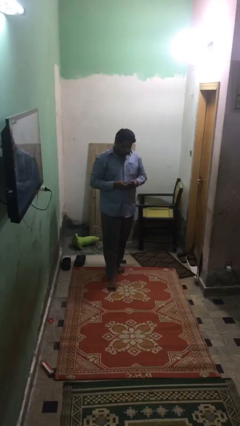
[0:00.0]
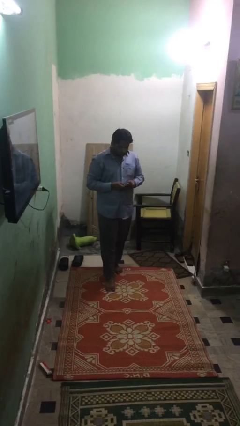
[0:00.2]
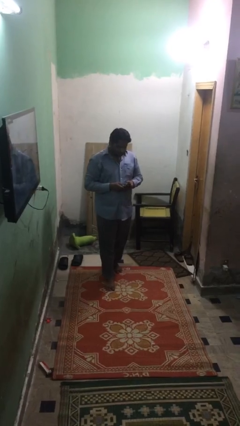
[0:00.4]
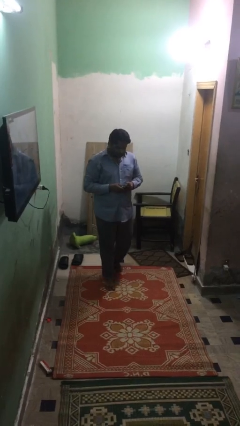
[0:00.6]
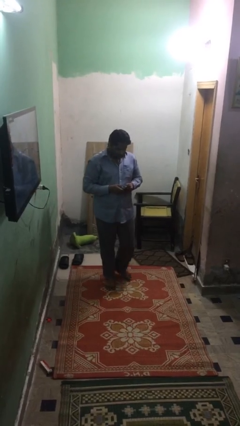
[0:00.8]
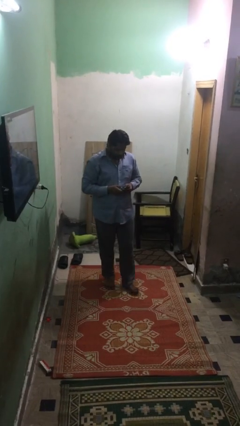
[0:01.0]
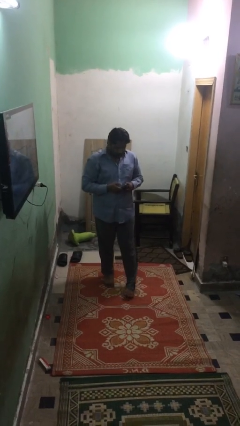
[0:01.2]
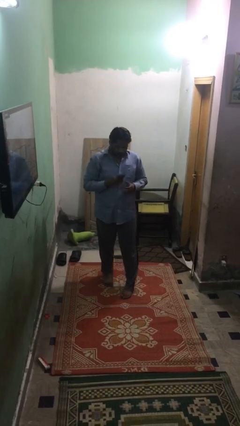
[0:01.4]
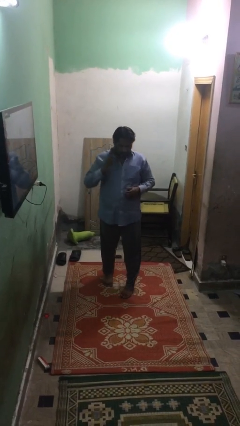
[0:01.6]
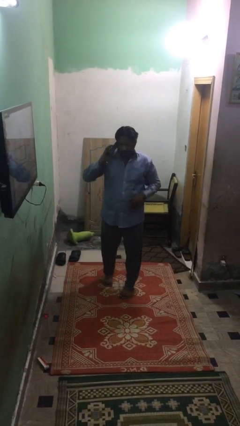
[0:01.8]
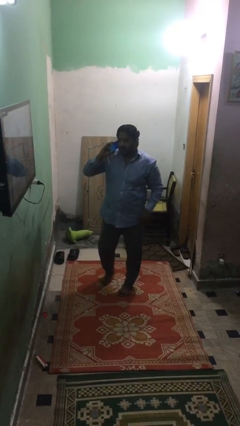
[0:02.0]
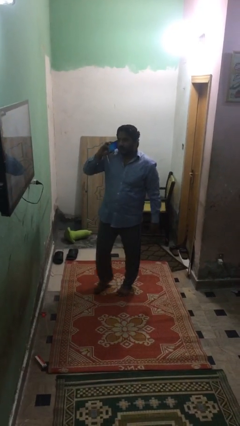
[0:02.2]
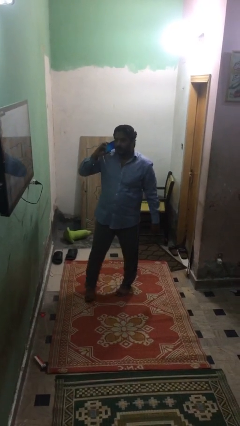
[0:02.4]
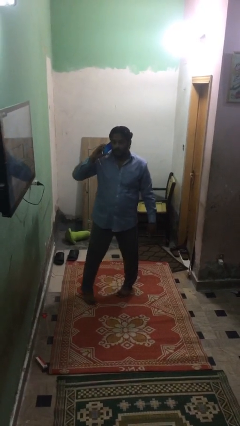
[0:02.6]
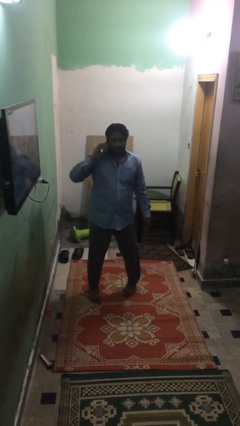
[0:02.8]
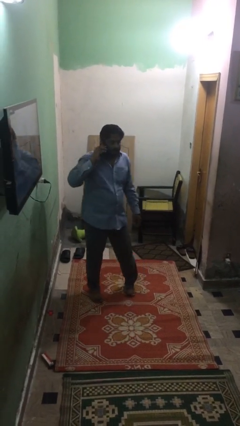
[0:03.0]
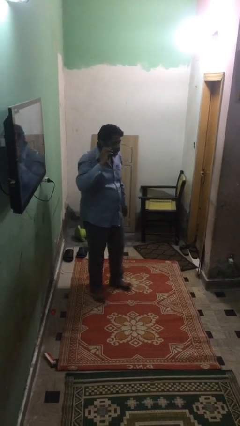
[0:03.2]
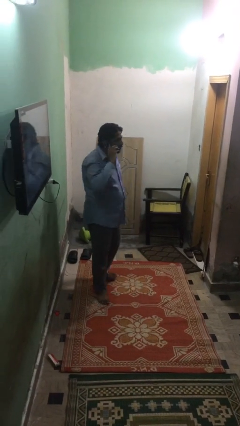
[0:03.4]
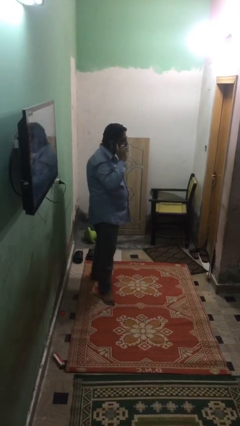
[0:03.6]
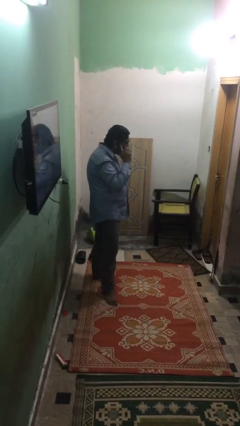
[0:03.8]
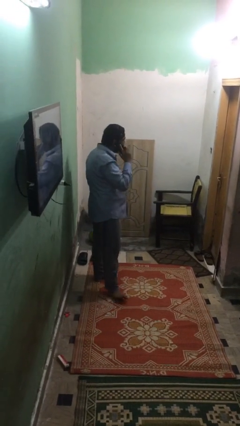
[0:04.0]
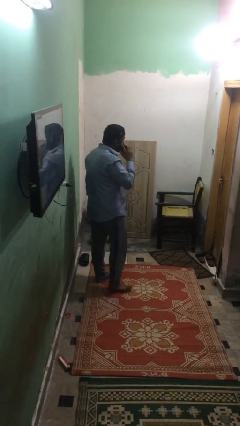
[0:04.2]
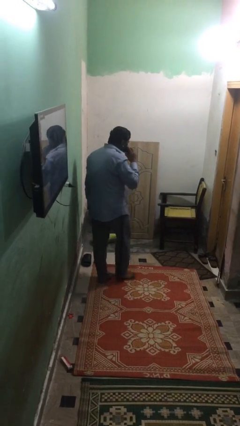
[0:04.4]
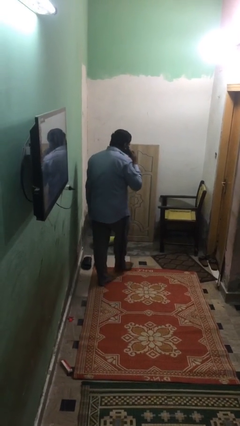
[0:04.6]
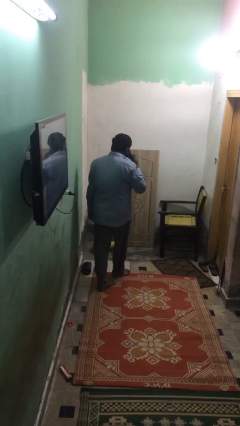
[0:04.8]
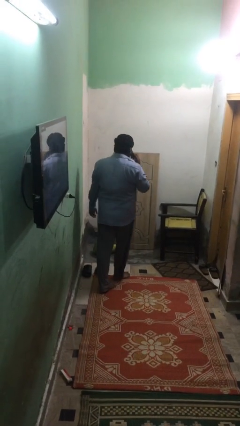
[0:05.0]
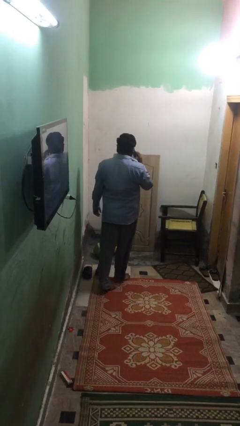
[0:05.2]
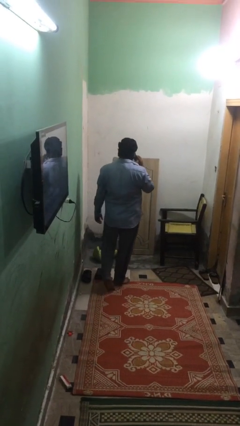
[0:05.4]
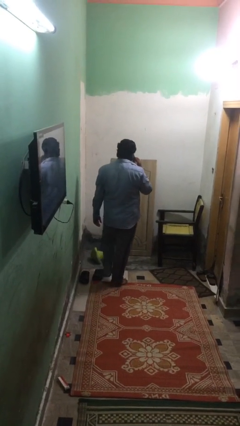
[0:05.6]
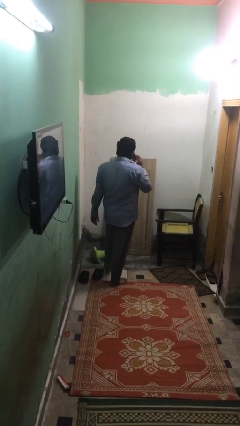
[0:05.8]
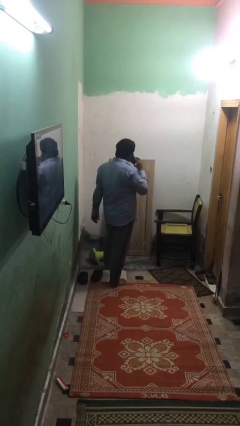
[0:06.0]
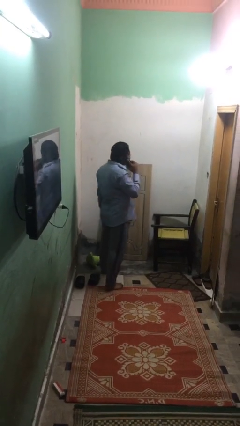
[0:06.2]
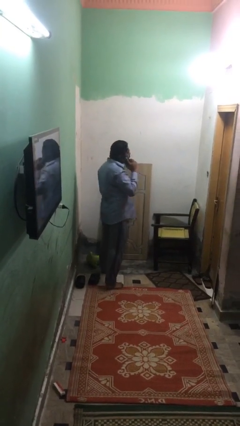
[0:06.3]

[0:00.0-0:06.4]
person talks on phone

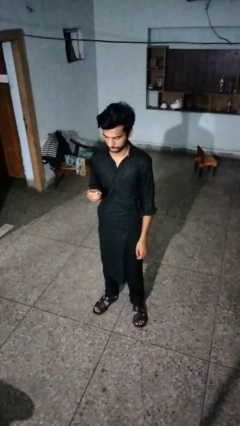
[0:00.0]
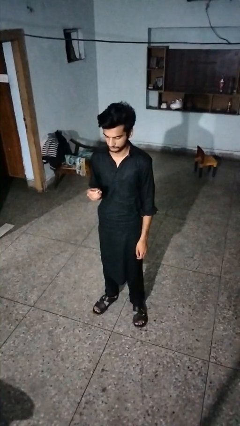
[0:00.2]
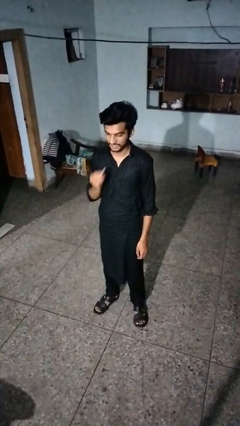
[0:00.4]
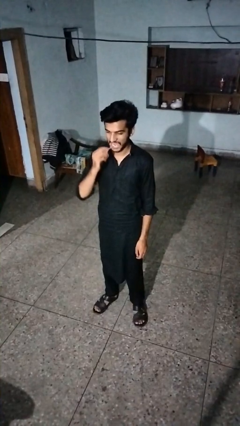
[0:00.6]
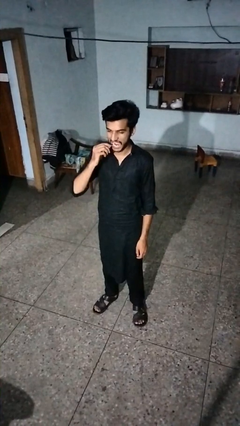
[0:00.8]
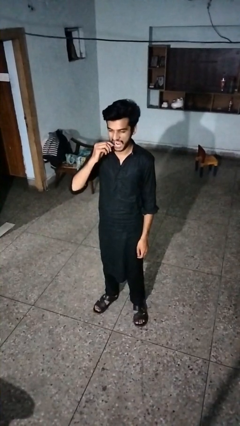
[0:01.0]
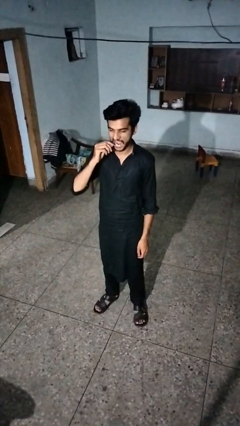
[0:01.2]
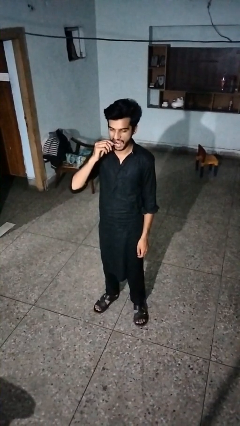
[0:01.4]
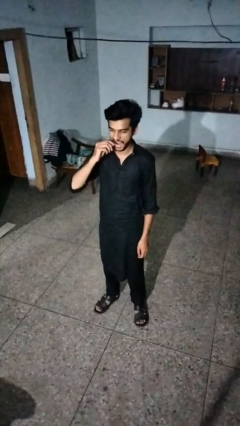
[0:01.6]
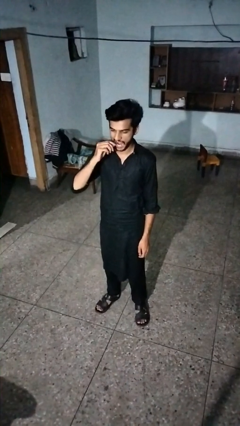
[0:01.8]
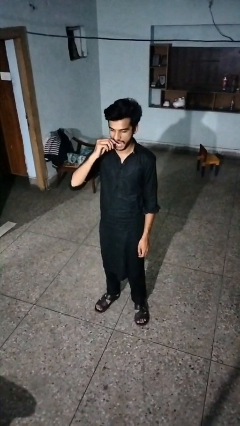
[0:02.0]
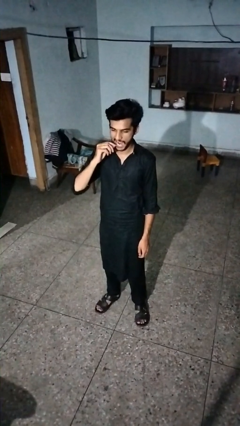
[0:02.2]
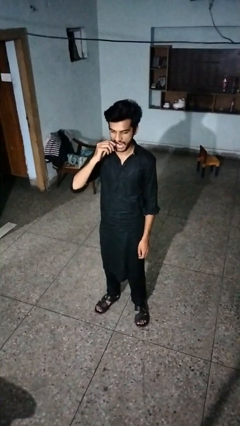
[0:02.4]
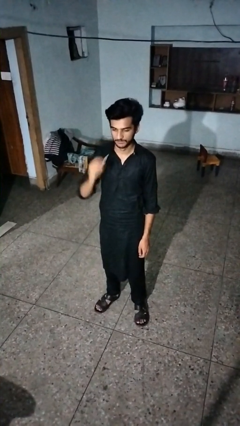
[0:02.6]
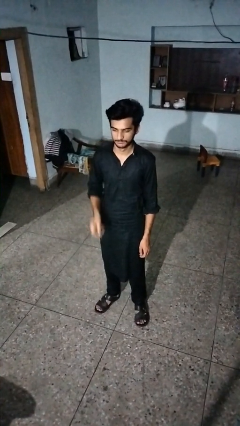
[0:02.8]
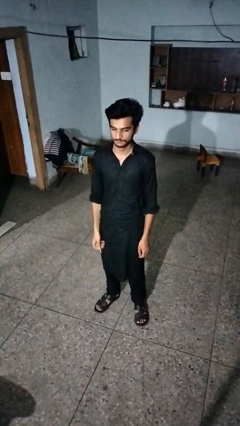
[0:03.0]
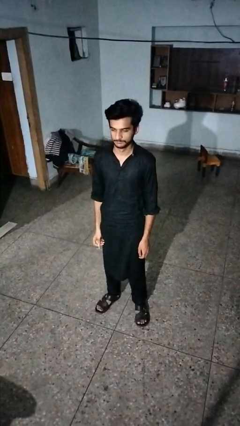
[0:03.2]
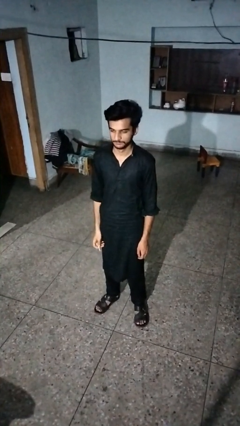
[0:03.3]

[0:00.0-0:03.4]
person flosses

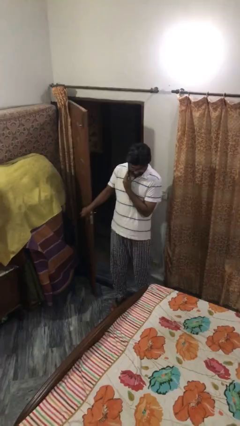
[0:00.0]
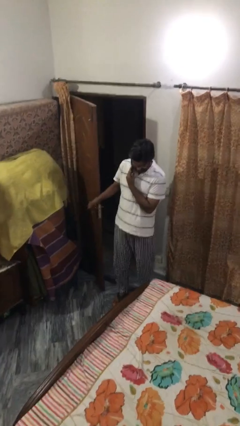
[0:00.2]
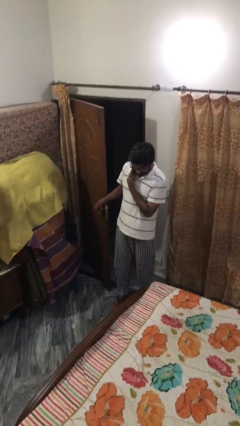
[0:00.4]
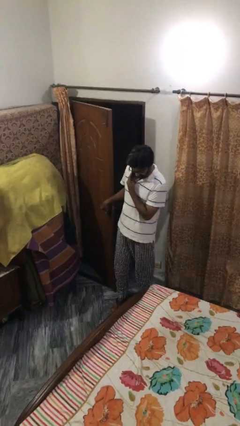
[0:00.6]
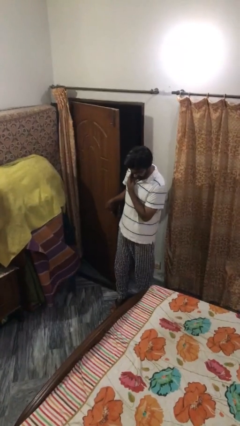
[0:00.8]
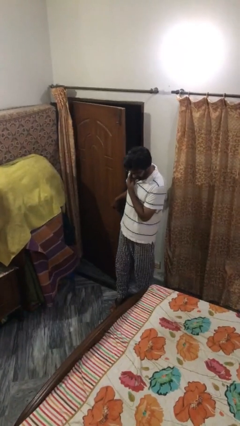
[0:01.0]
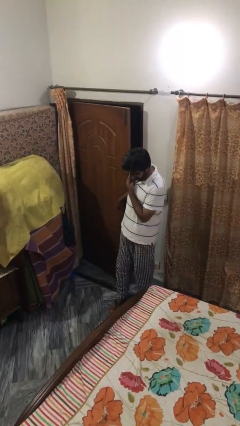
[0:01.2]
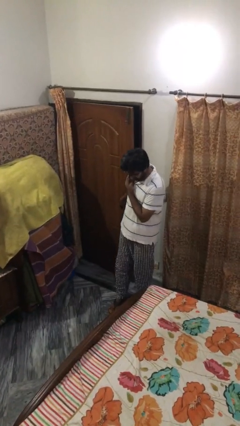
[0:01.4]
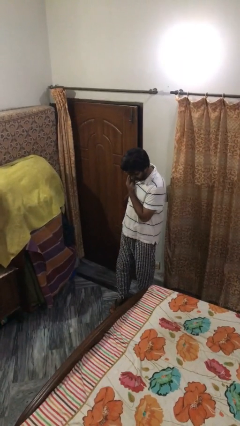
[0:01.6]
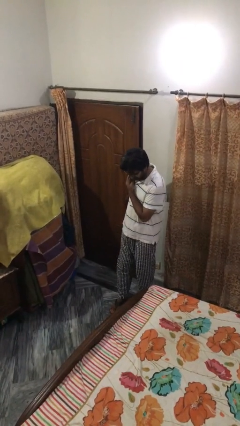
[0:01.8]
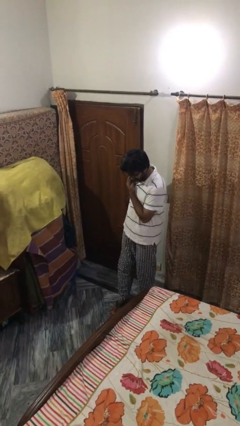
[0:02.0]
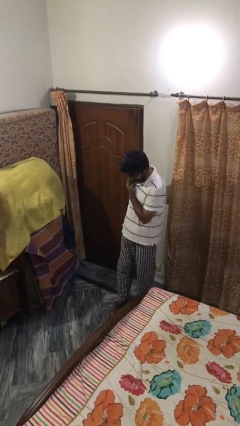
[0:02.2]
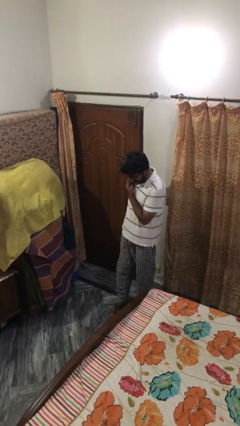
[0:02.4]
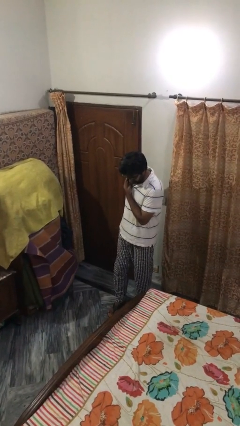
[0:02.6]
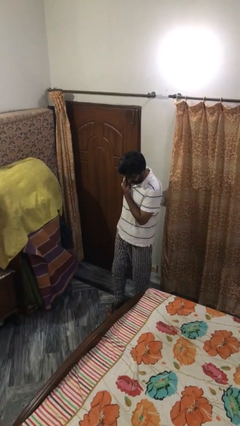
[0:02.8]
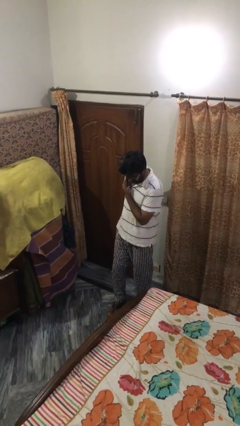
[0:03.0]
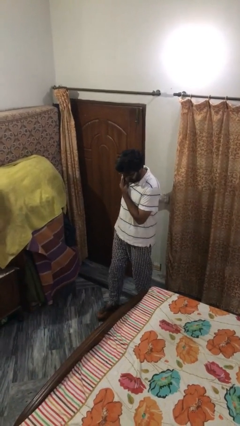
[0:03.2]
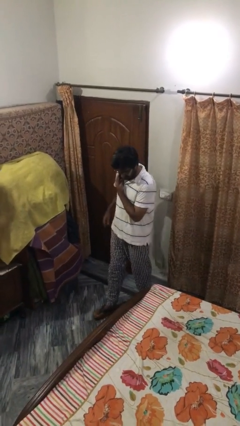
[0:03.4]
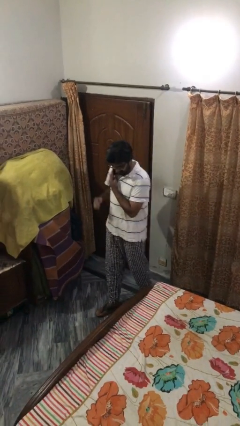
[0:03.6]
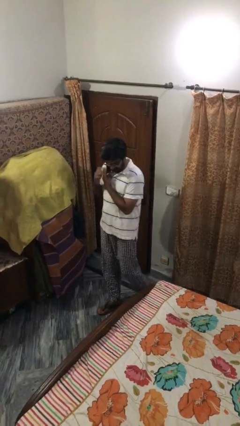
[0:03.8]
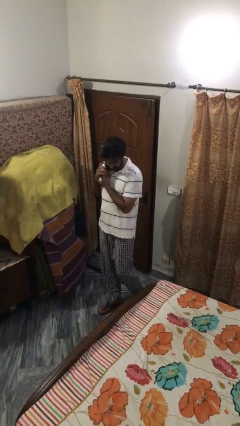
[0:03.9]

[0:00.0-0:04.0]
person closes facility door

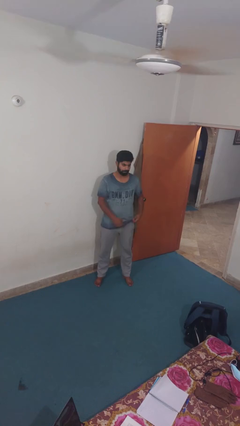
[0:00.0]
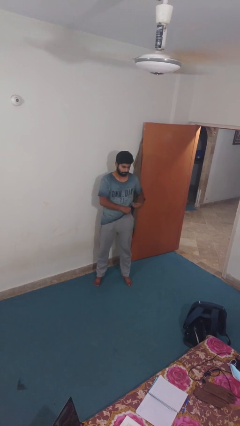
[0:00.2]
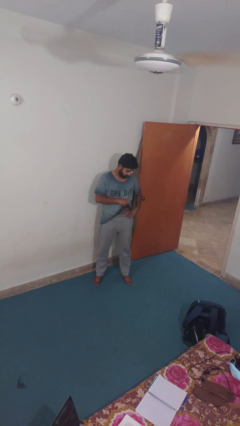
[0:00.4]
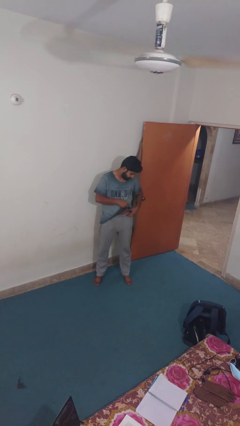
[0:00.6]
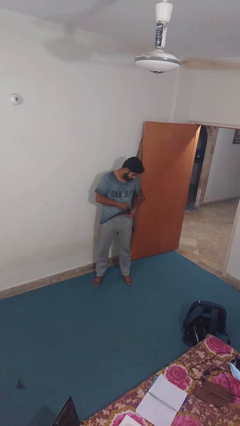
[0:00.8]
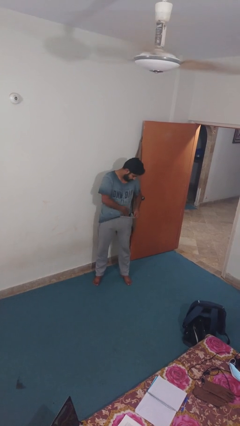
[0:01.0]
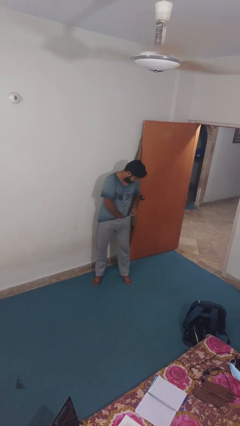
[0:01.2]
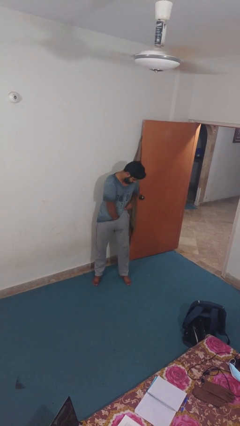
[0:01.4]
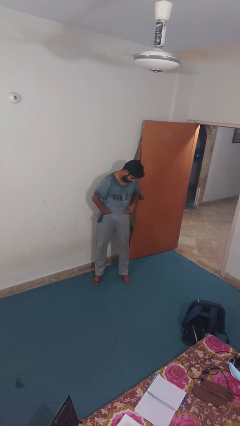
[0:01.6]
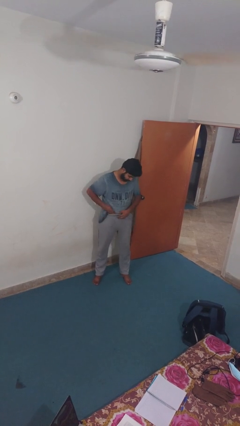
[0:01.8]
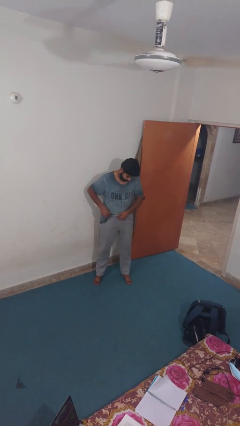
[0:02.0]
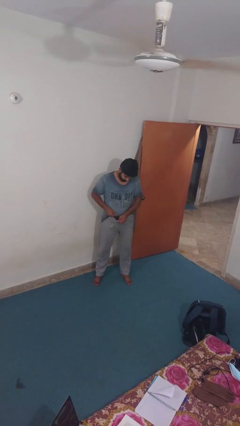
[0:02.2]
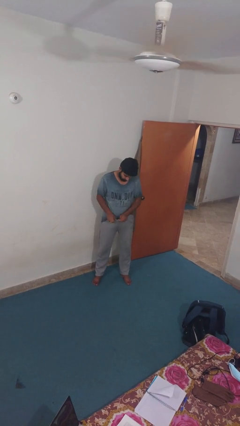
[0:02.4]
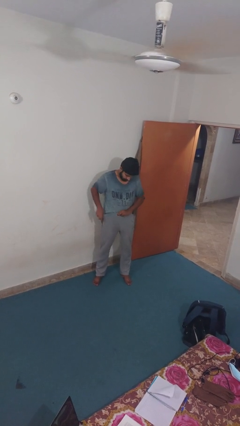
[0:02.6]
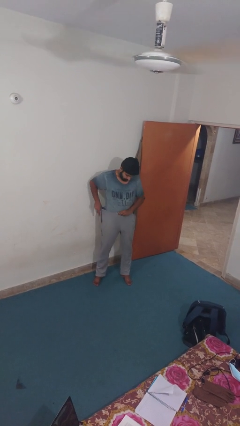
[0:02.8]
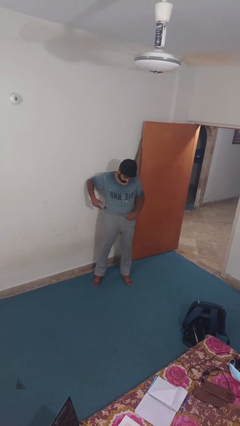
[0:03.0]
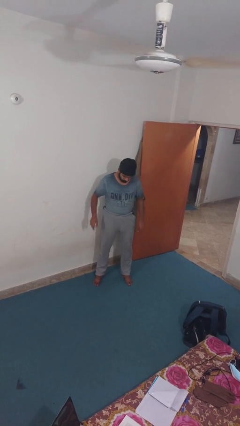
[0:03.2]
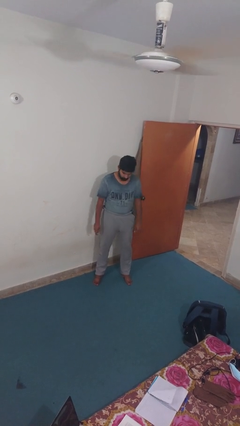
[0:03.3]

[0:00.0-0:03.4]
person tucks in shirt

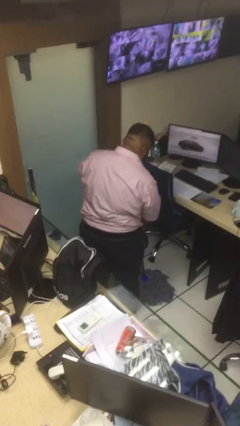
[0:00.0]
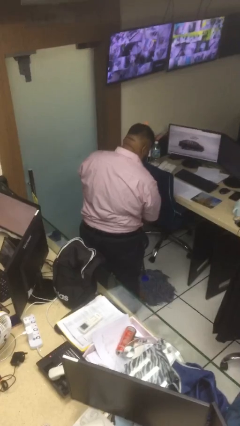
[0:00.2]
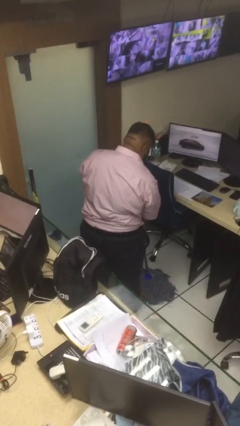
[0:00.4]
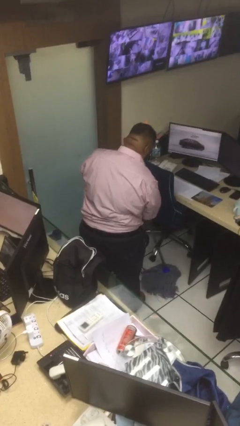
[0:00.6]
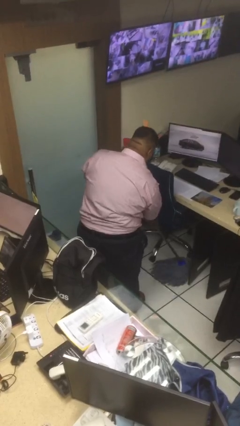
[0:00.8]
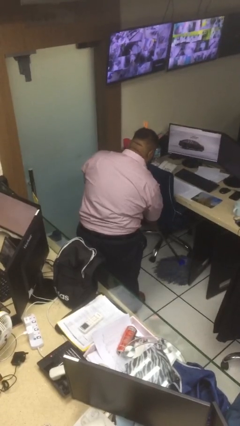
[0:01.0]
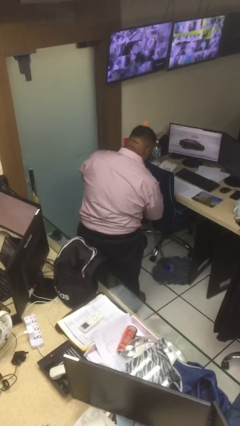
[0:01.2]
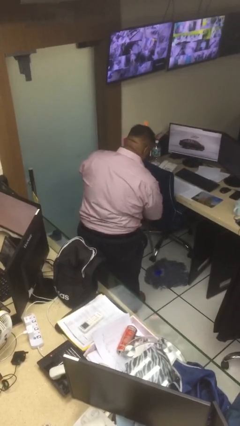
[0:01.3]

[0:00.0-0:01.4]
person mops
